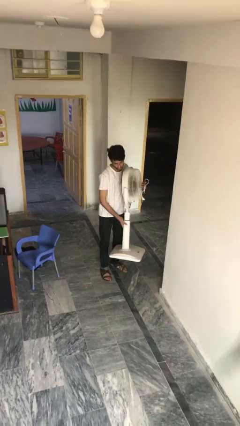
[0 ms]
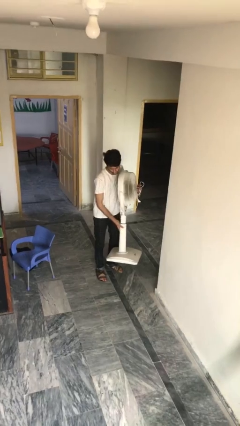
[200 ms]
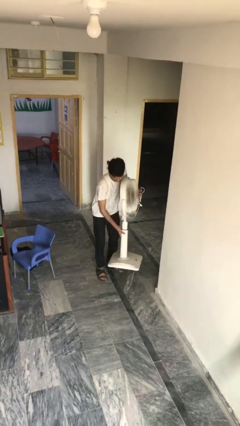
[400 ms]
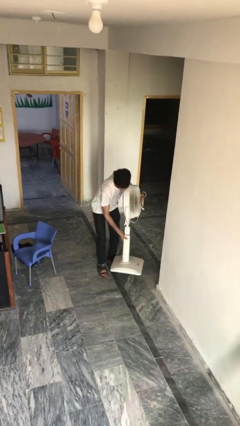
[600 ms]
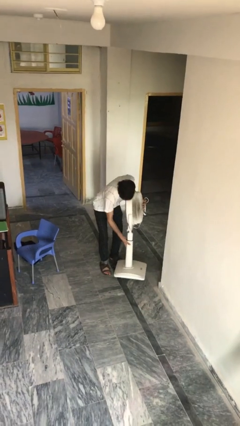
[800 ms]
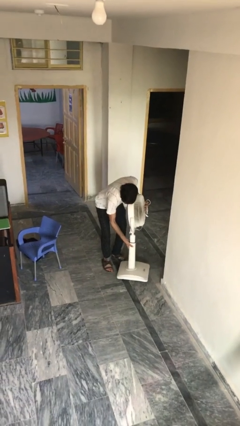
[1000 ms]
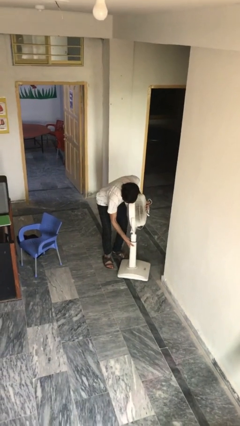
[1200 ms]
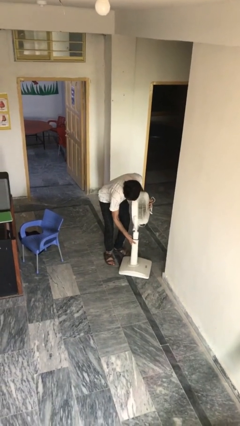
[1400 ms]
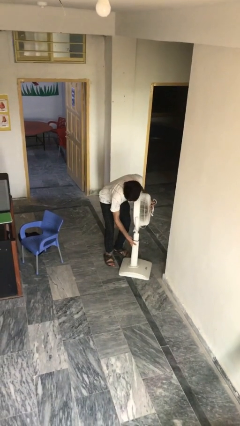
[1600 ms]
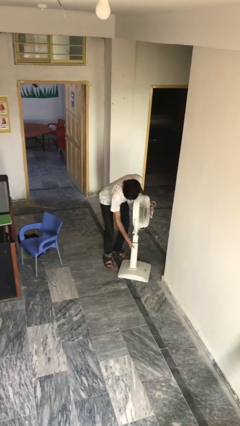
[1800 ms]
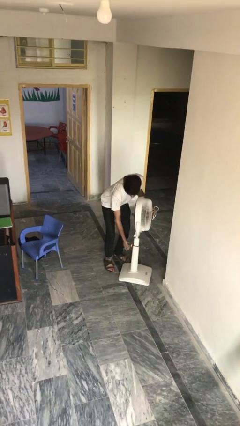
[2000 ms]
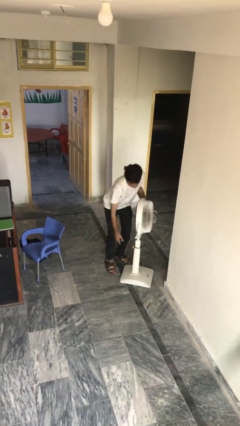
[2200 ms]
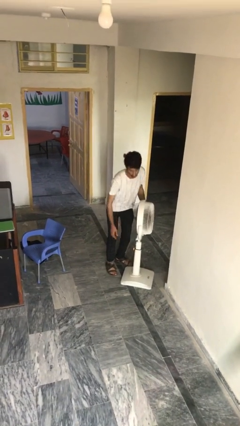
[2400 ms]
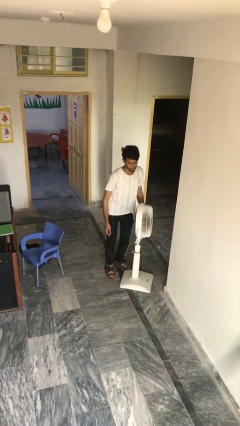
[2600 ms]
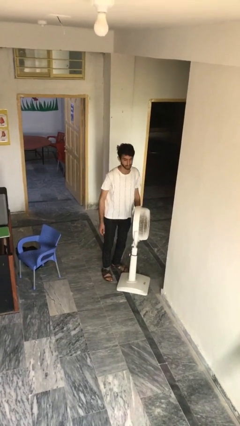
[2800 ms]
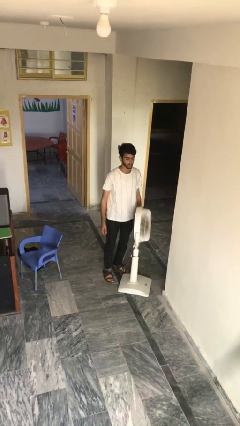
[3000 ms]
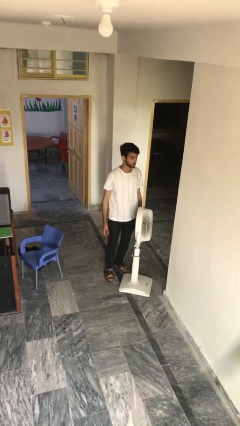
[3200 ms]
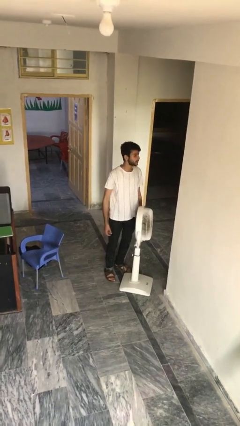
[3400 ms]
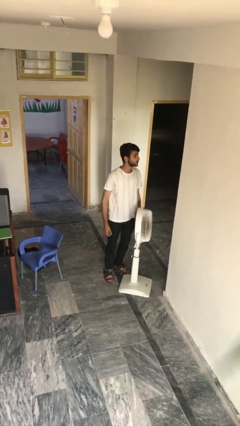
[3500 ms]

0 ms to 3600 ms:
person puts down object on floor

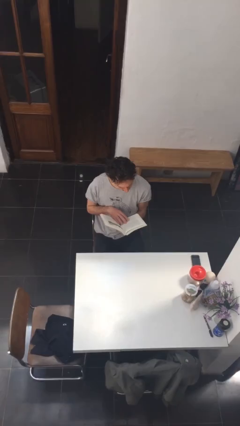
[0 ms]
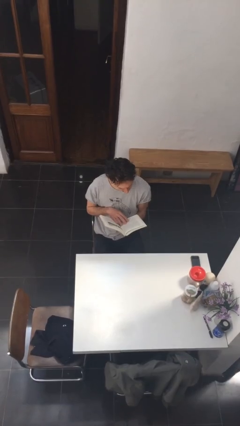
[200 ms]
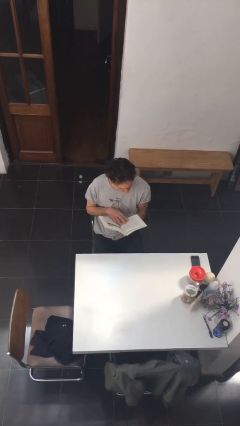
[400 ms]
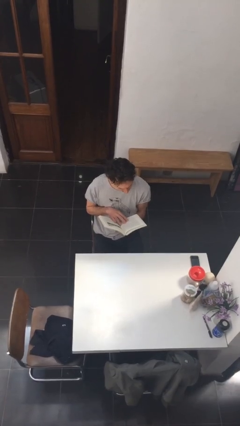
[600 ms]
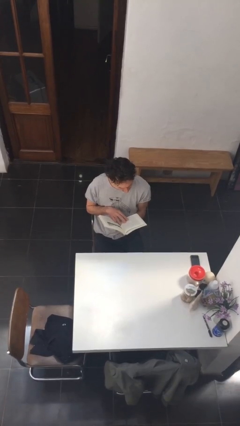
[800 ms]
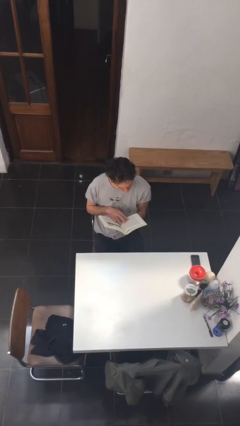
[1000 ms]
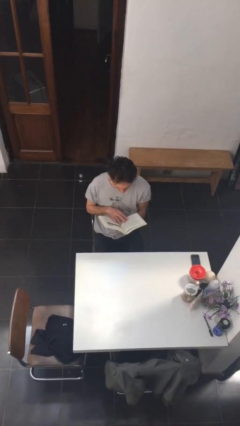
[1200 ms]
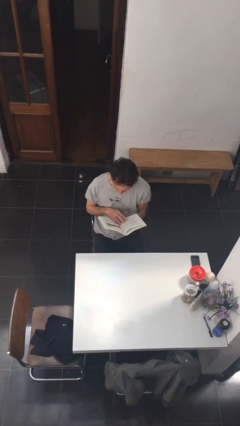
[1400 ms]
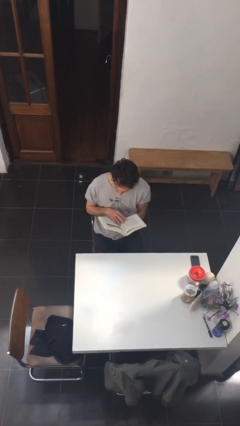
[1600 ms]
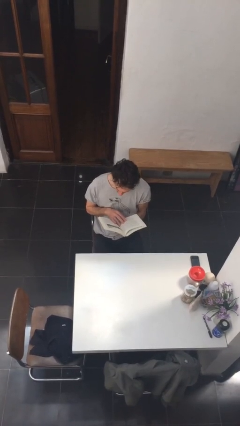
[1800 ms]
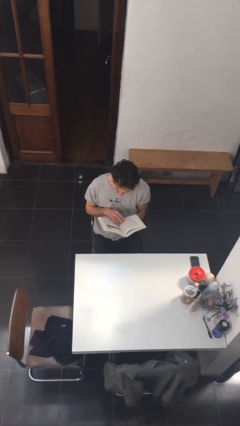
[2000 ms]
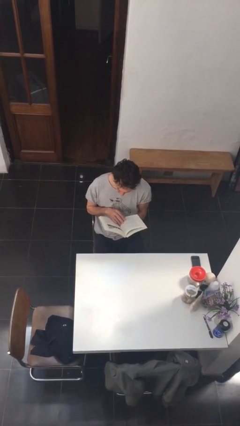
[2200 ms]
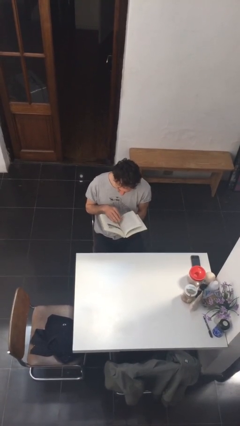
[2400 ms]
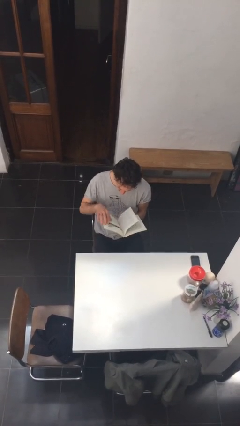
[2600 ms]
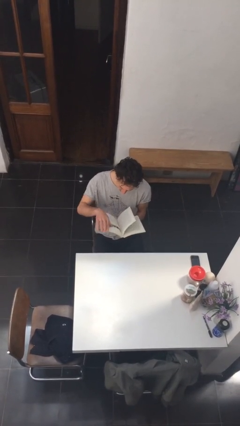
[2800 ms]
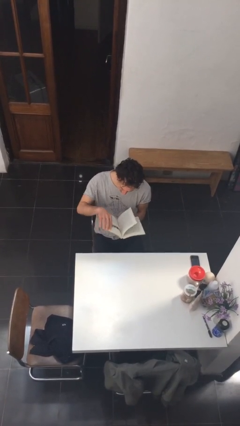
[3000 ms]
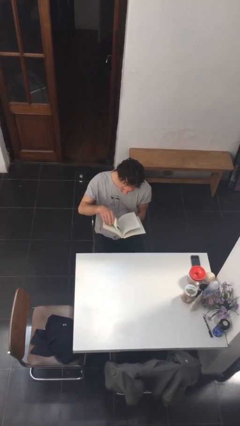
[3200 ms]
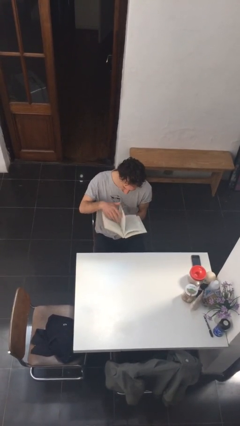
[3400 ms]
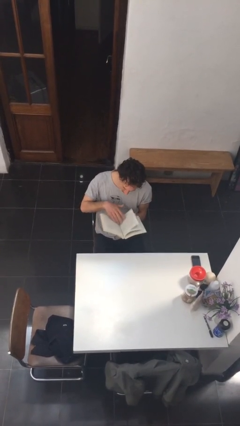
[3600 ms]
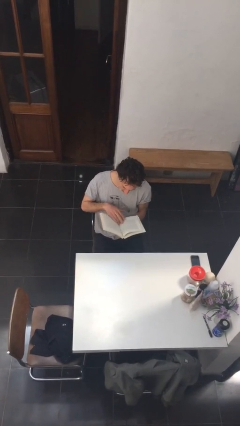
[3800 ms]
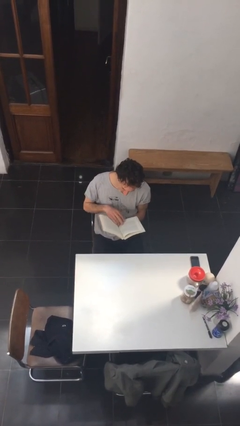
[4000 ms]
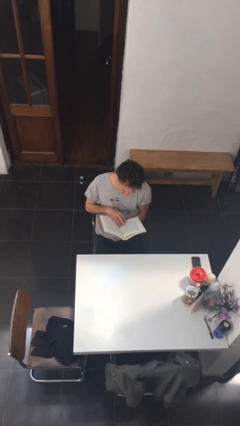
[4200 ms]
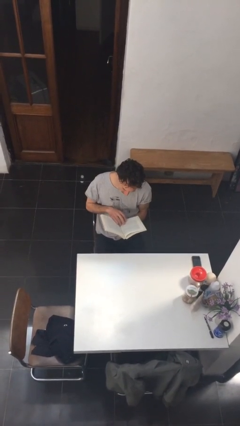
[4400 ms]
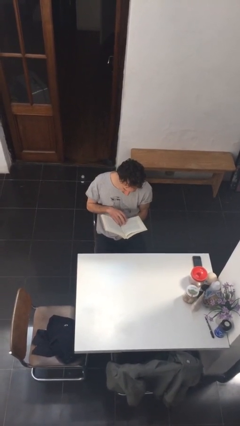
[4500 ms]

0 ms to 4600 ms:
person reads document

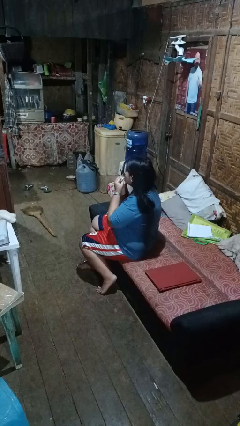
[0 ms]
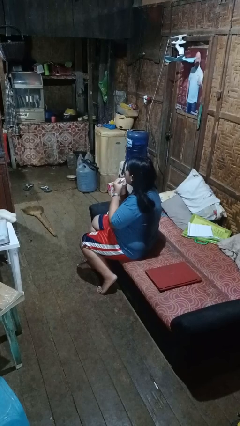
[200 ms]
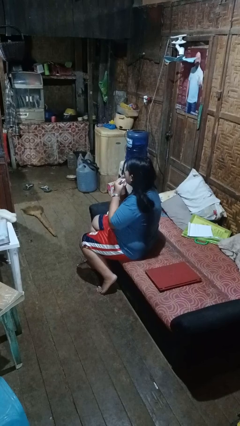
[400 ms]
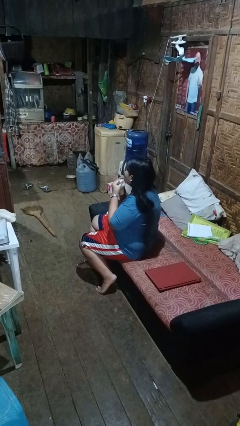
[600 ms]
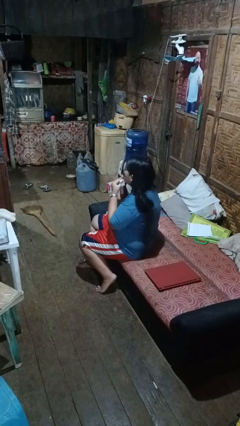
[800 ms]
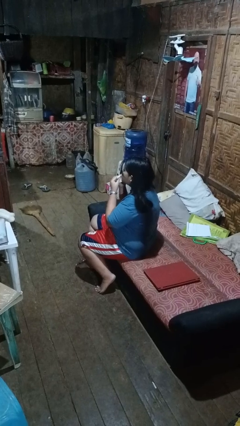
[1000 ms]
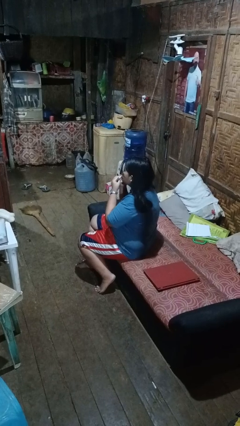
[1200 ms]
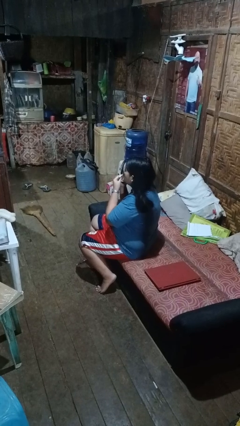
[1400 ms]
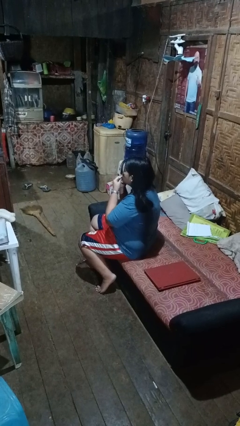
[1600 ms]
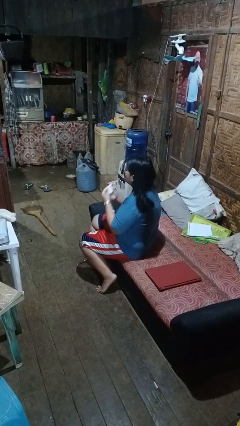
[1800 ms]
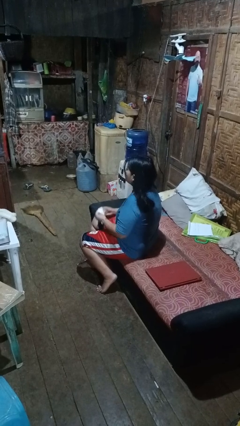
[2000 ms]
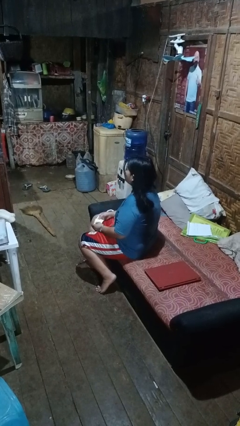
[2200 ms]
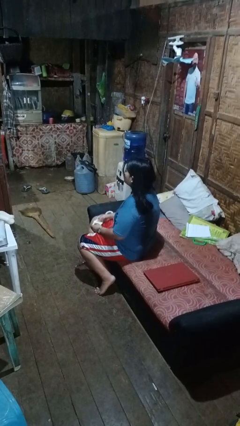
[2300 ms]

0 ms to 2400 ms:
person wipes mouth with napkin

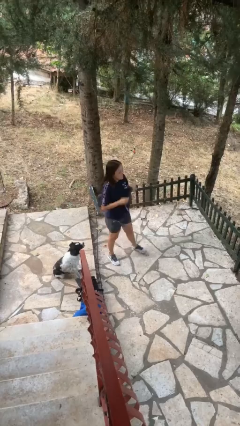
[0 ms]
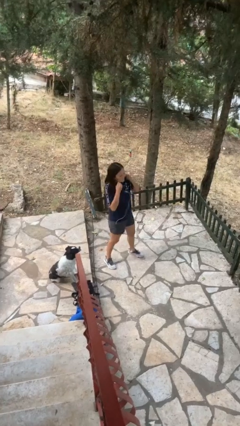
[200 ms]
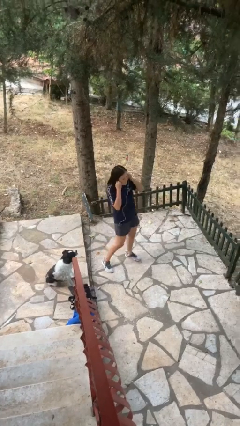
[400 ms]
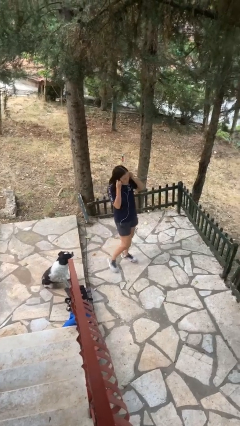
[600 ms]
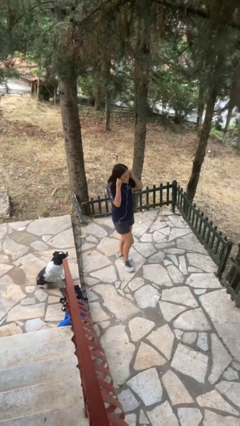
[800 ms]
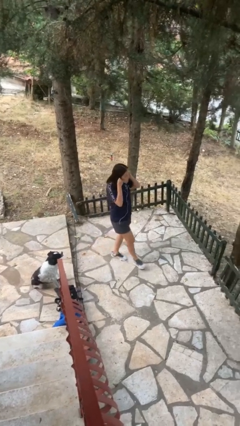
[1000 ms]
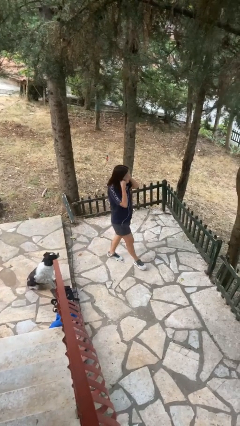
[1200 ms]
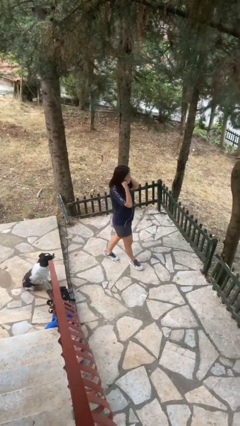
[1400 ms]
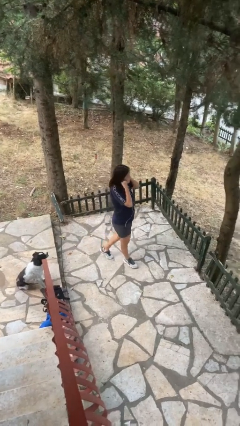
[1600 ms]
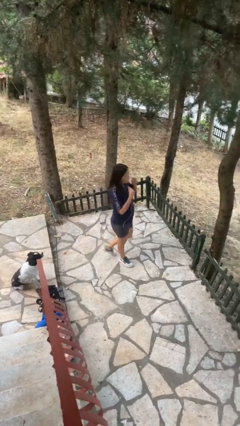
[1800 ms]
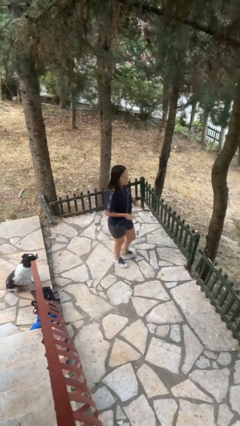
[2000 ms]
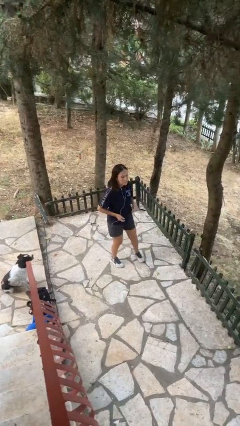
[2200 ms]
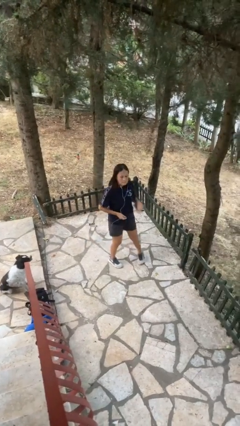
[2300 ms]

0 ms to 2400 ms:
person puts on headphones

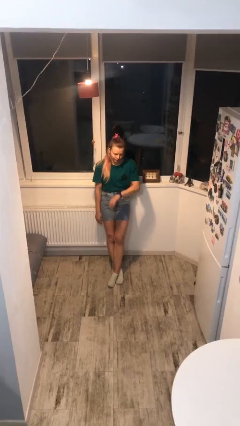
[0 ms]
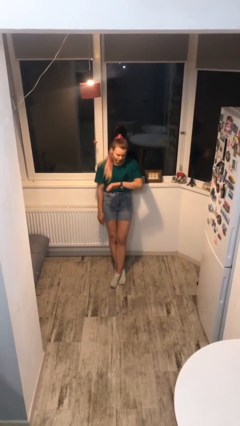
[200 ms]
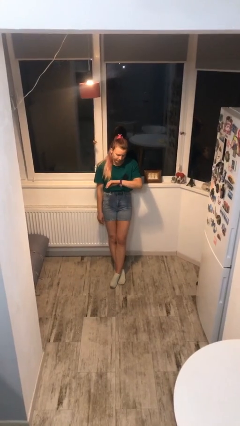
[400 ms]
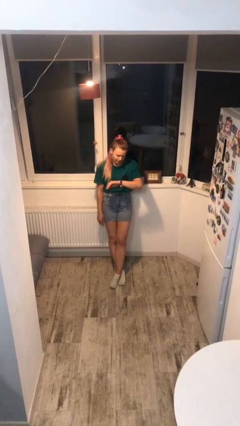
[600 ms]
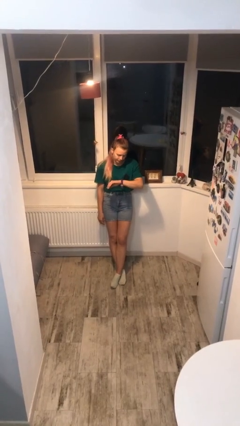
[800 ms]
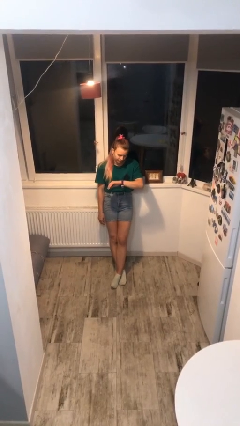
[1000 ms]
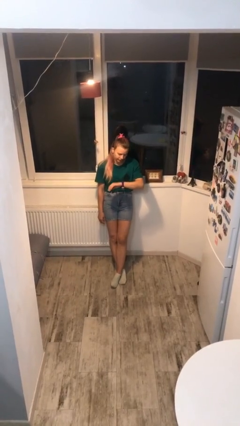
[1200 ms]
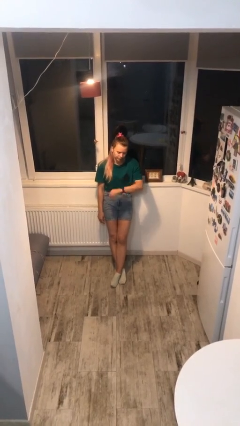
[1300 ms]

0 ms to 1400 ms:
person looks at wristwatch

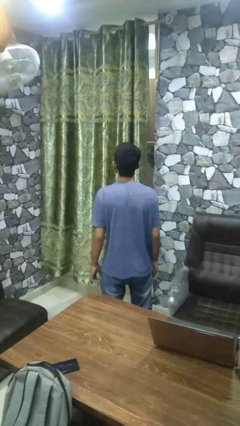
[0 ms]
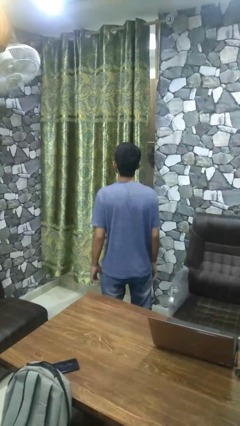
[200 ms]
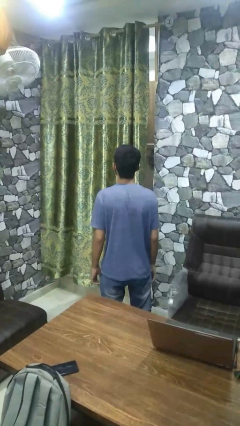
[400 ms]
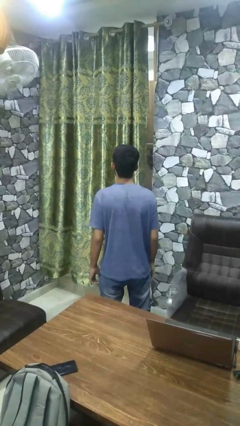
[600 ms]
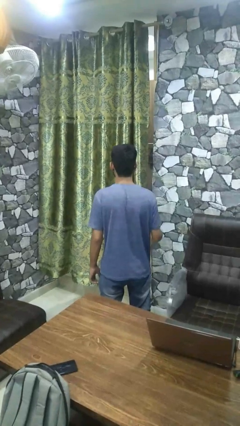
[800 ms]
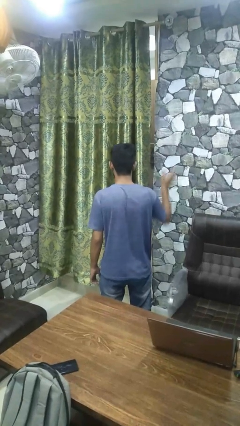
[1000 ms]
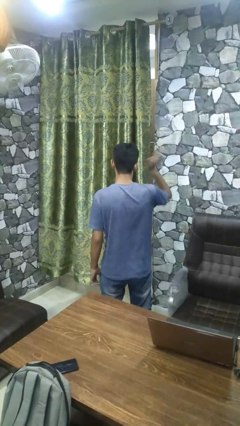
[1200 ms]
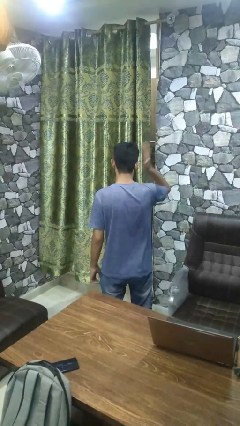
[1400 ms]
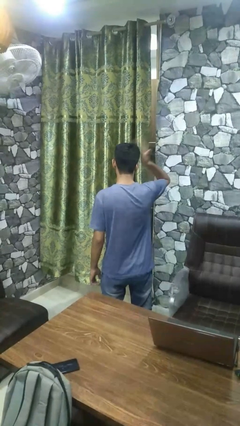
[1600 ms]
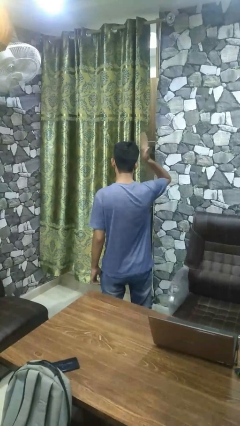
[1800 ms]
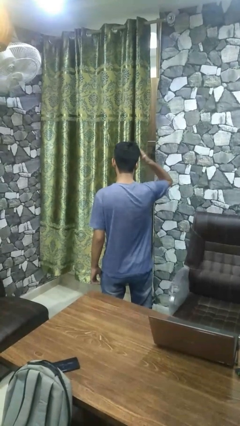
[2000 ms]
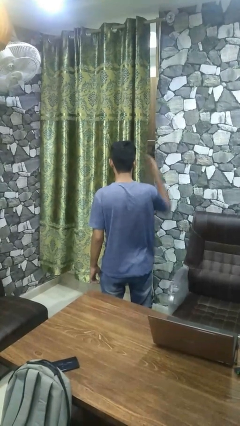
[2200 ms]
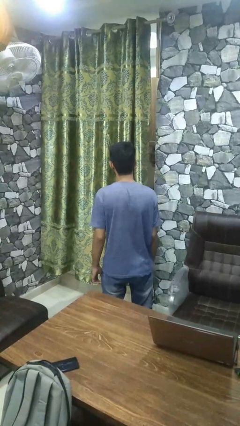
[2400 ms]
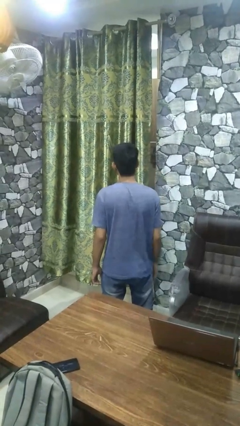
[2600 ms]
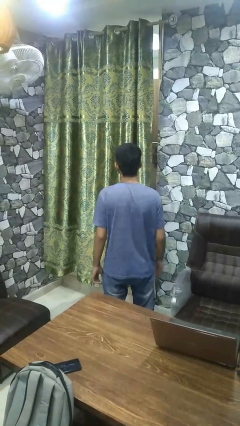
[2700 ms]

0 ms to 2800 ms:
person pats head

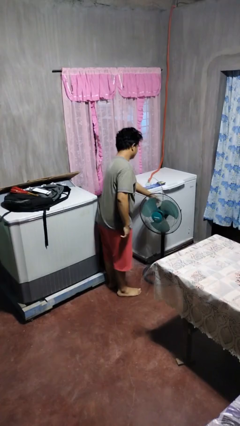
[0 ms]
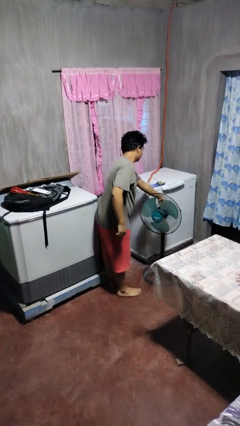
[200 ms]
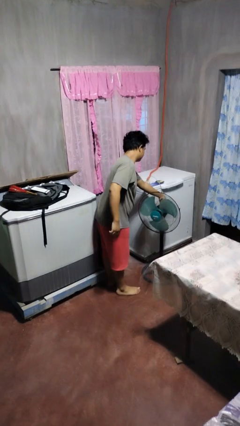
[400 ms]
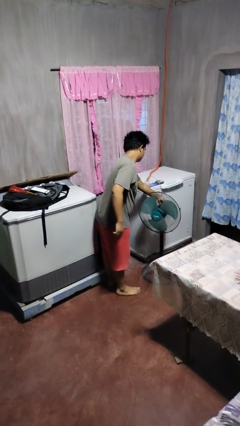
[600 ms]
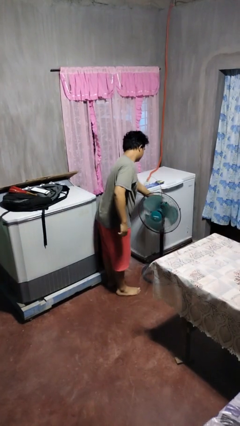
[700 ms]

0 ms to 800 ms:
person turns on fan
